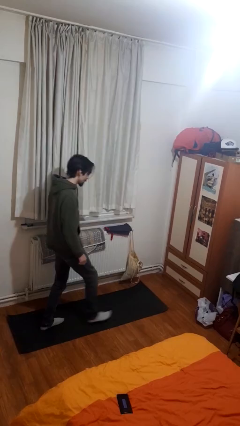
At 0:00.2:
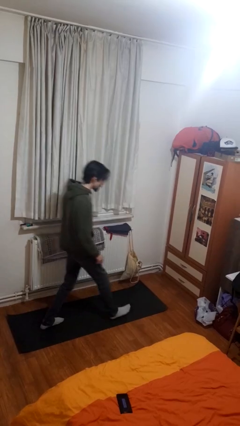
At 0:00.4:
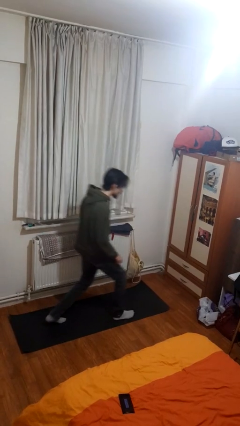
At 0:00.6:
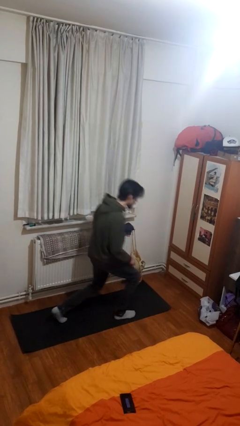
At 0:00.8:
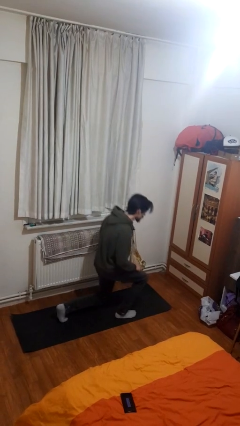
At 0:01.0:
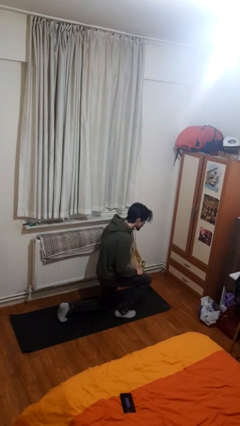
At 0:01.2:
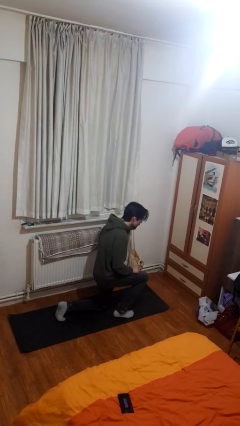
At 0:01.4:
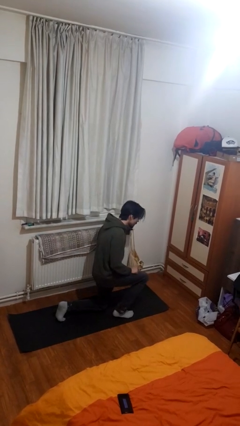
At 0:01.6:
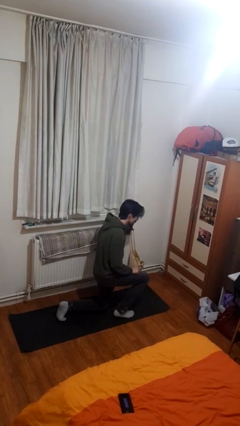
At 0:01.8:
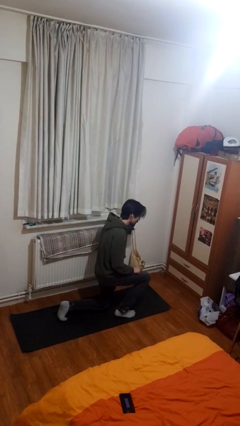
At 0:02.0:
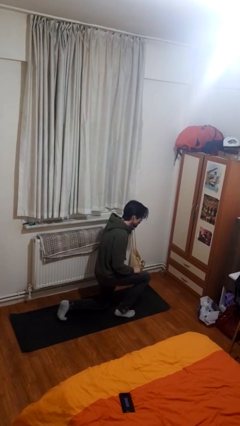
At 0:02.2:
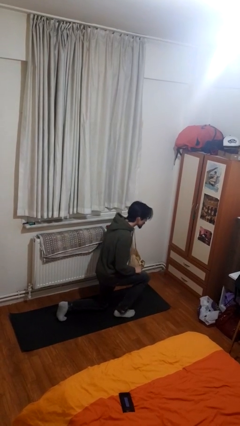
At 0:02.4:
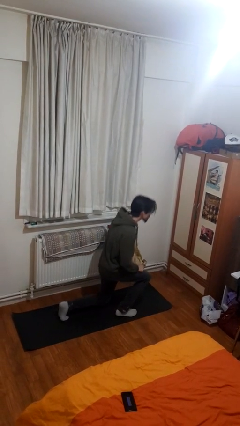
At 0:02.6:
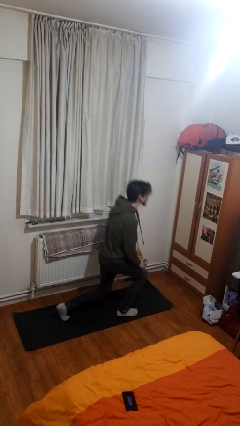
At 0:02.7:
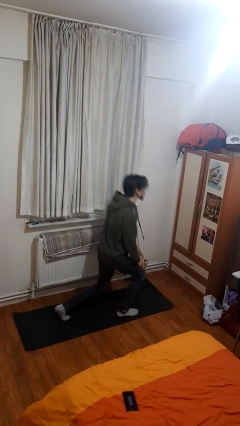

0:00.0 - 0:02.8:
person kneels

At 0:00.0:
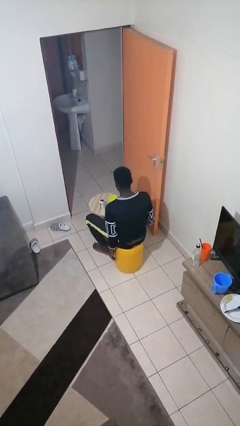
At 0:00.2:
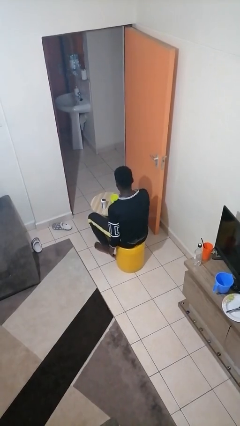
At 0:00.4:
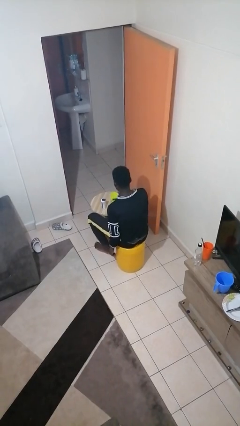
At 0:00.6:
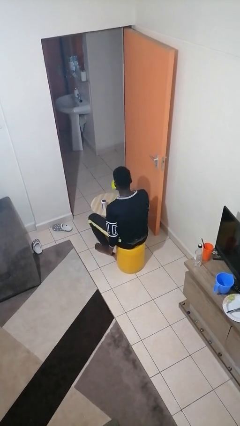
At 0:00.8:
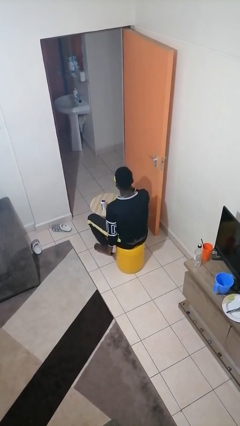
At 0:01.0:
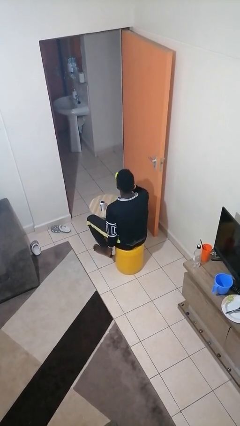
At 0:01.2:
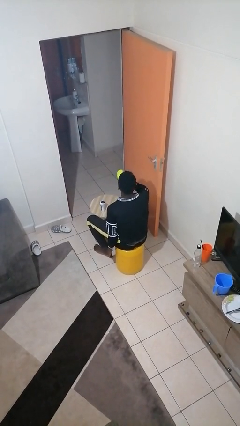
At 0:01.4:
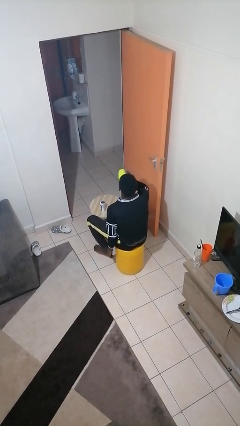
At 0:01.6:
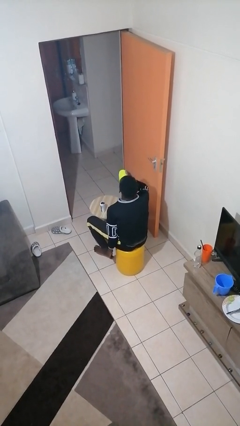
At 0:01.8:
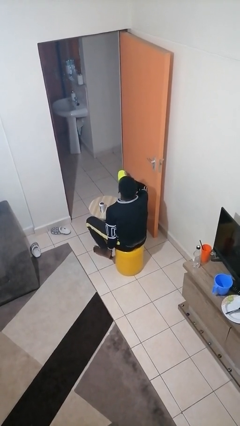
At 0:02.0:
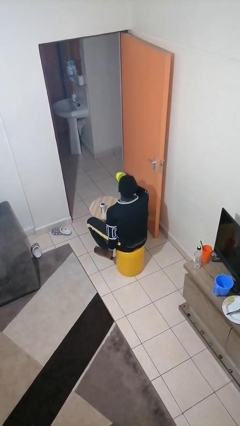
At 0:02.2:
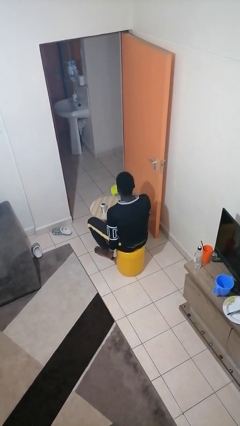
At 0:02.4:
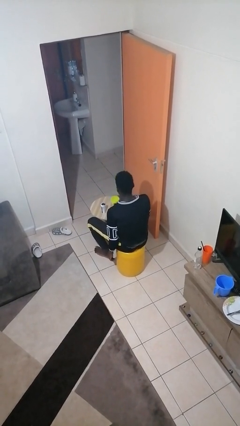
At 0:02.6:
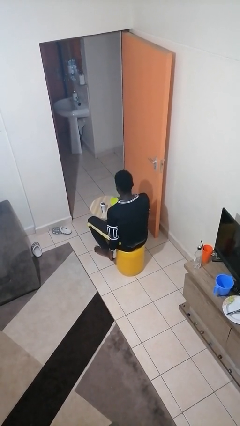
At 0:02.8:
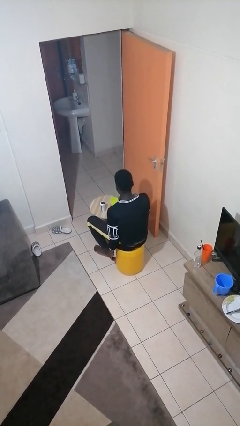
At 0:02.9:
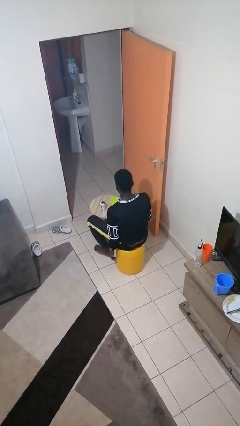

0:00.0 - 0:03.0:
person drinks from cup

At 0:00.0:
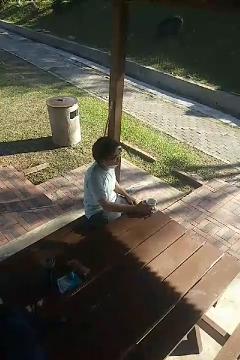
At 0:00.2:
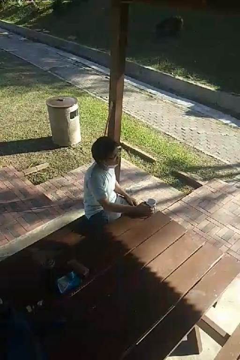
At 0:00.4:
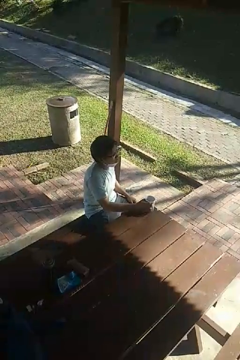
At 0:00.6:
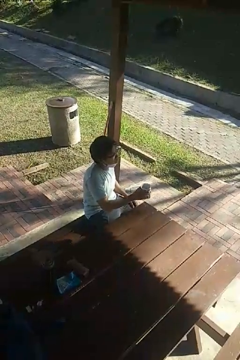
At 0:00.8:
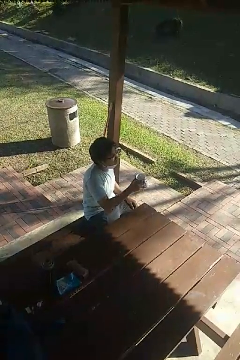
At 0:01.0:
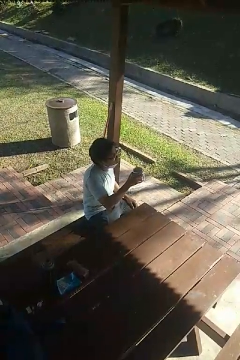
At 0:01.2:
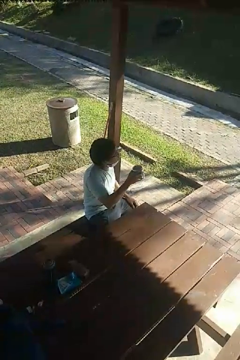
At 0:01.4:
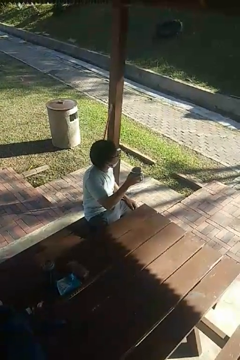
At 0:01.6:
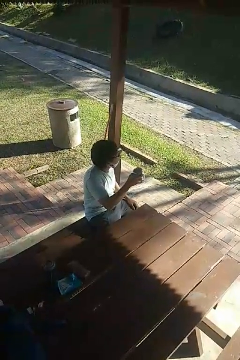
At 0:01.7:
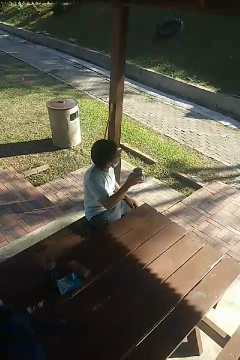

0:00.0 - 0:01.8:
person picks up object from table

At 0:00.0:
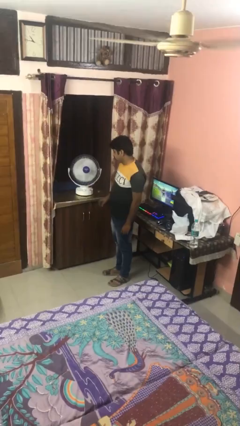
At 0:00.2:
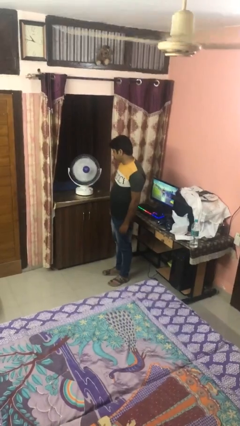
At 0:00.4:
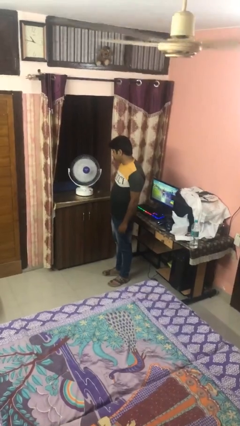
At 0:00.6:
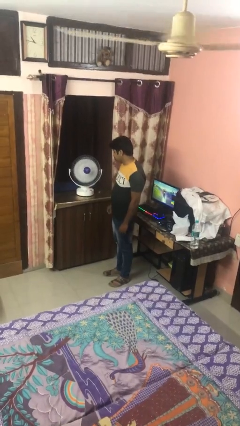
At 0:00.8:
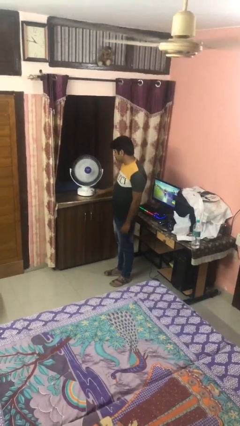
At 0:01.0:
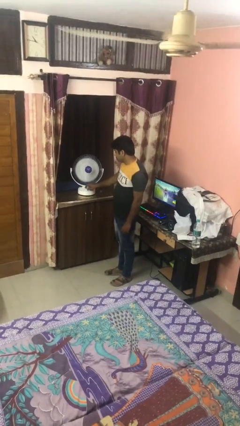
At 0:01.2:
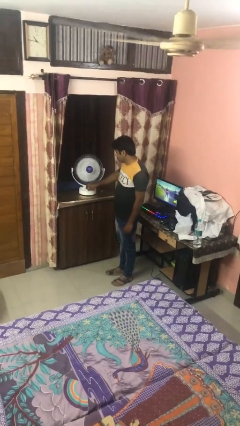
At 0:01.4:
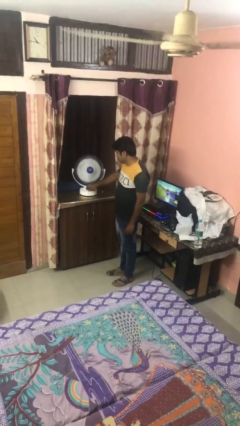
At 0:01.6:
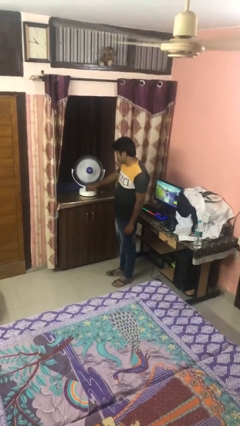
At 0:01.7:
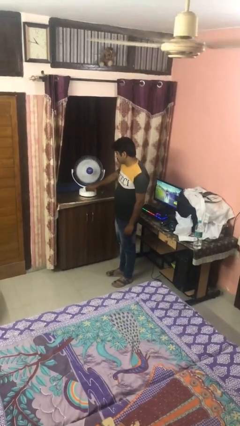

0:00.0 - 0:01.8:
person turns off fan

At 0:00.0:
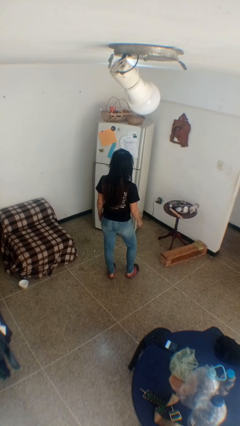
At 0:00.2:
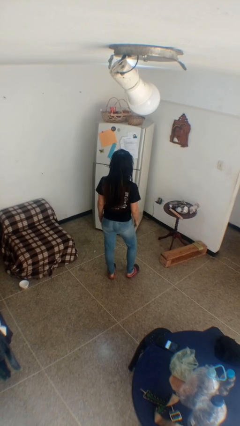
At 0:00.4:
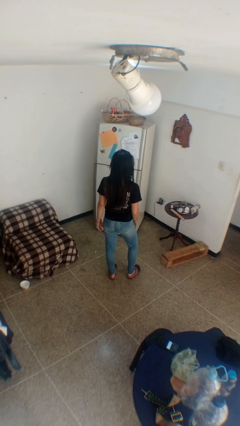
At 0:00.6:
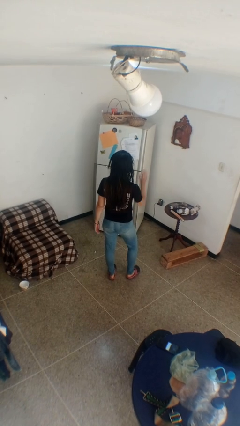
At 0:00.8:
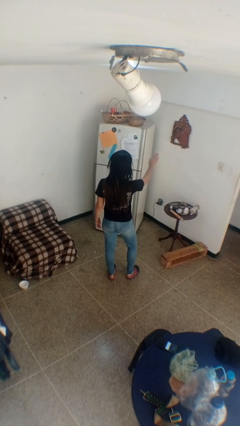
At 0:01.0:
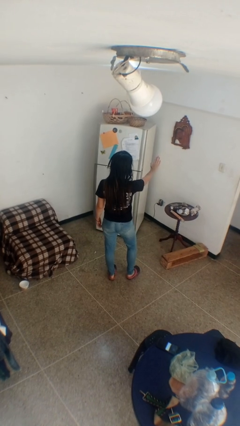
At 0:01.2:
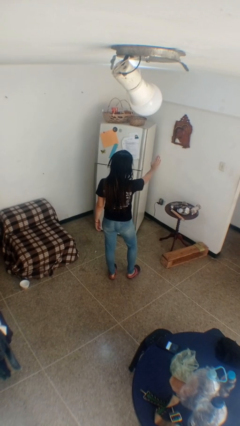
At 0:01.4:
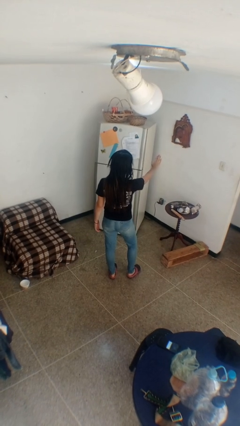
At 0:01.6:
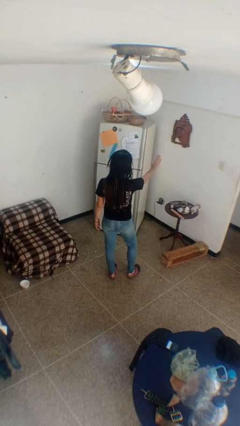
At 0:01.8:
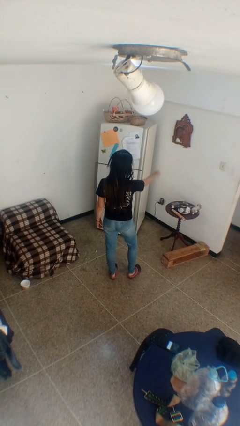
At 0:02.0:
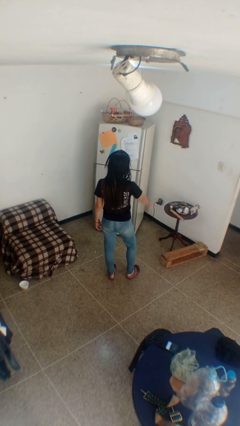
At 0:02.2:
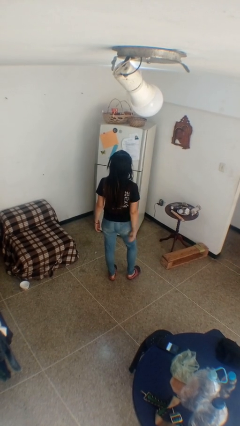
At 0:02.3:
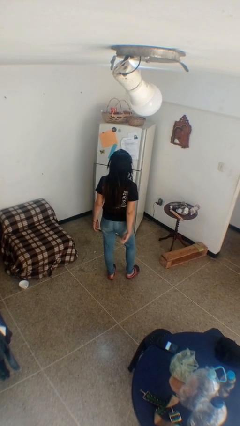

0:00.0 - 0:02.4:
person gestures stop

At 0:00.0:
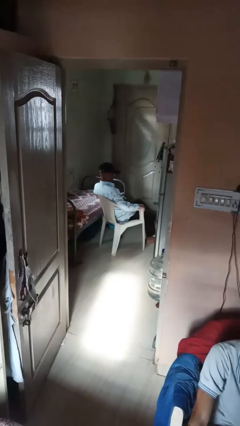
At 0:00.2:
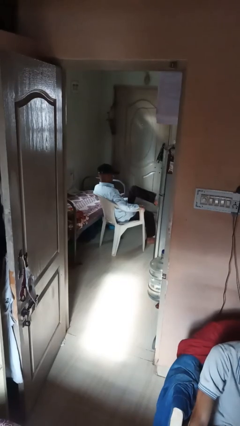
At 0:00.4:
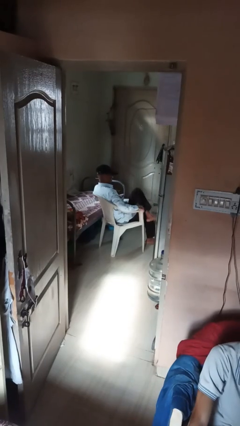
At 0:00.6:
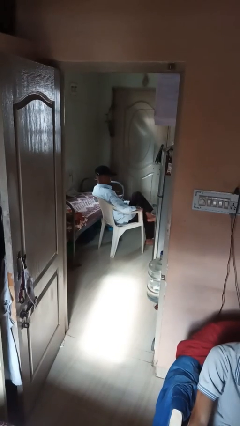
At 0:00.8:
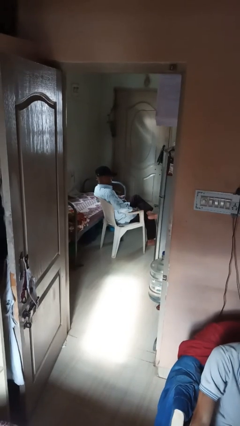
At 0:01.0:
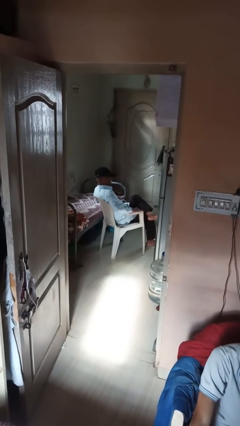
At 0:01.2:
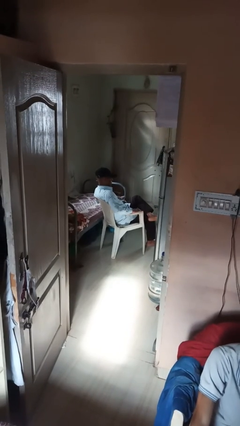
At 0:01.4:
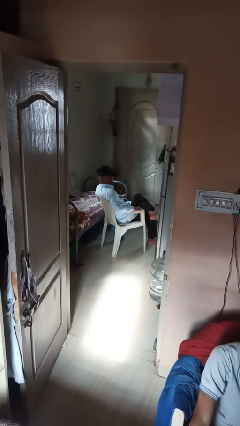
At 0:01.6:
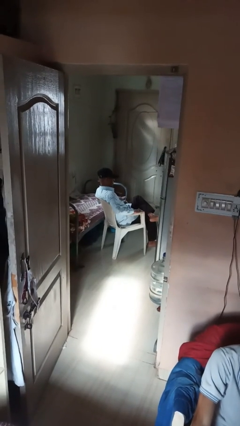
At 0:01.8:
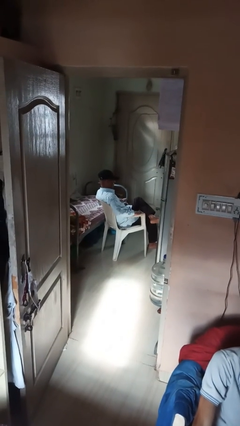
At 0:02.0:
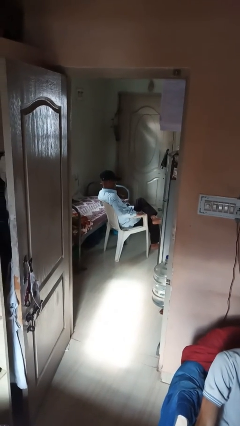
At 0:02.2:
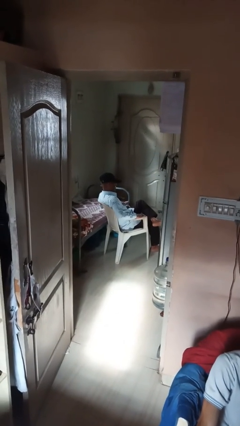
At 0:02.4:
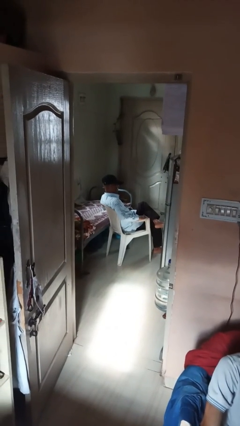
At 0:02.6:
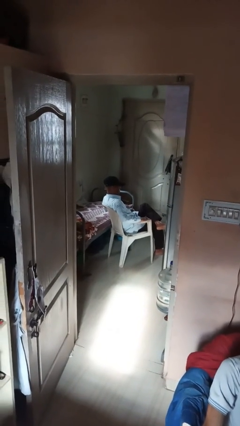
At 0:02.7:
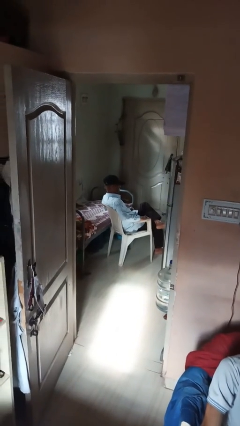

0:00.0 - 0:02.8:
person crosses legs

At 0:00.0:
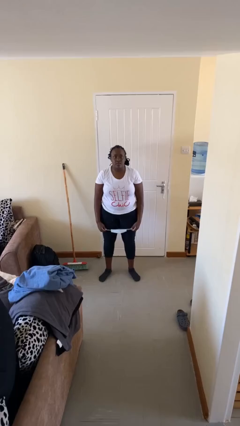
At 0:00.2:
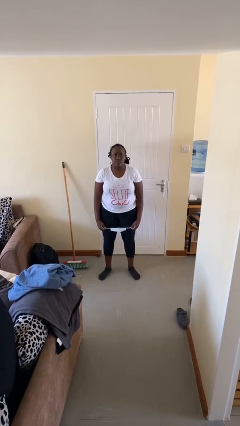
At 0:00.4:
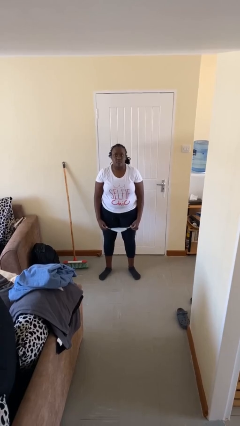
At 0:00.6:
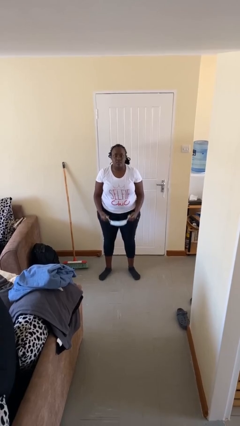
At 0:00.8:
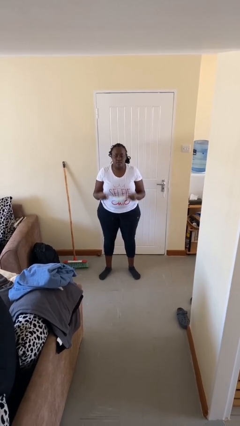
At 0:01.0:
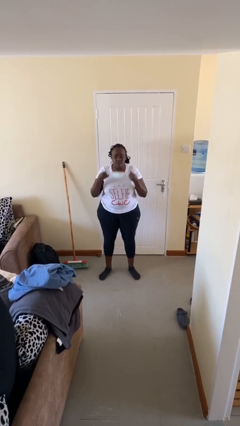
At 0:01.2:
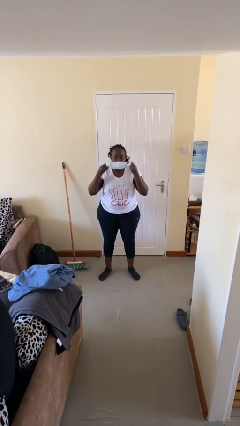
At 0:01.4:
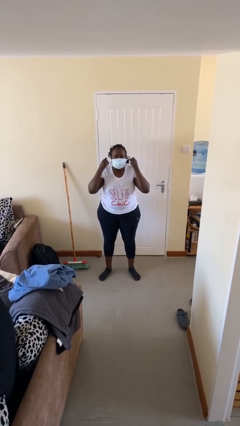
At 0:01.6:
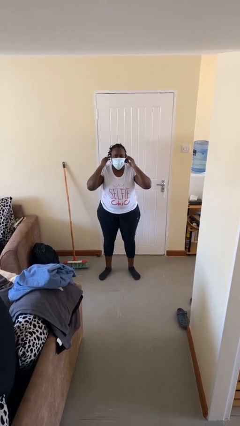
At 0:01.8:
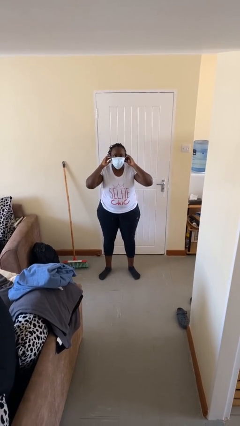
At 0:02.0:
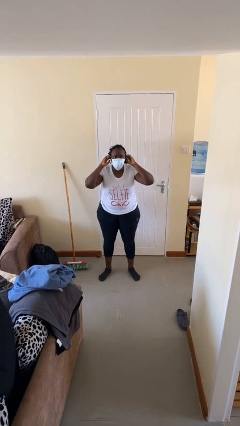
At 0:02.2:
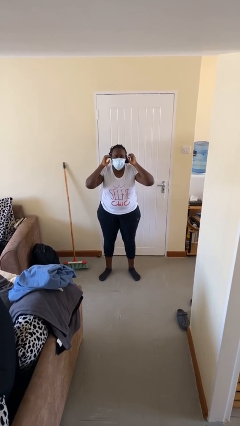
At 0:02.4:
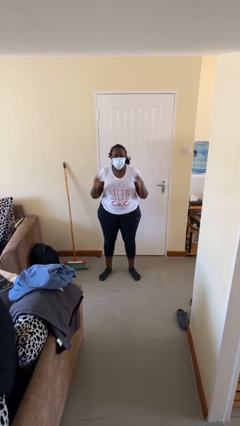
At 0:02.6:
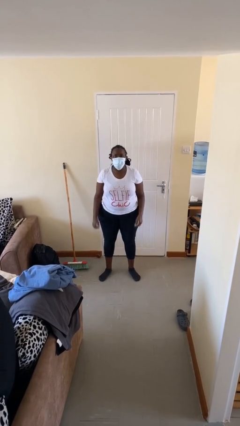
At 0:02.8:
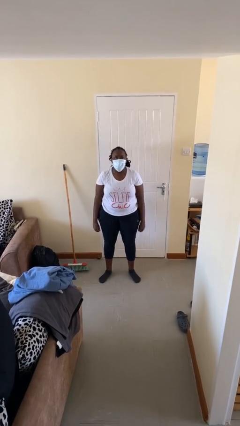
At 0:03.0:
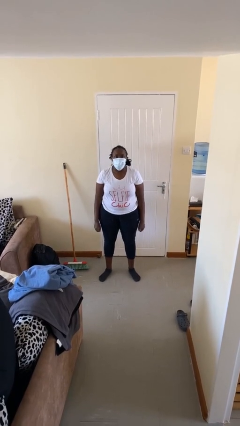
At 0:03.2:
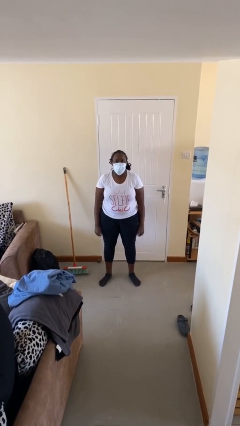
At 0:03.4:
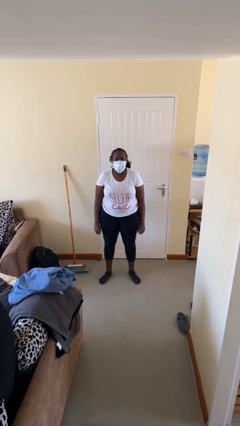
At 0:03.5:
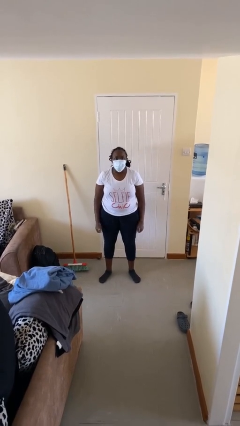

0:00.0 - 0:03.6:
person puts on facemask
